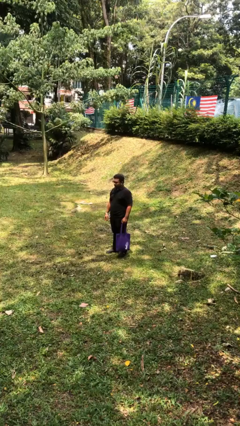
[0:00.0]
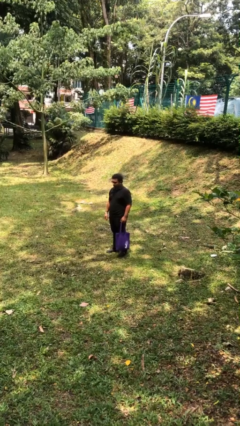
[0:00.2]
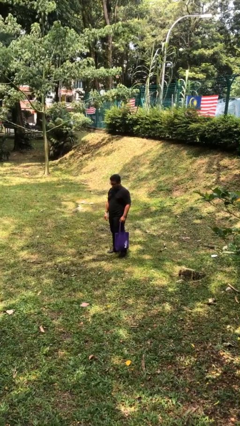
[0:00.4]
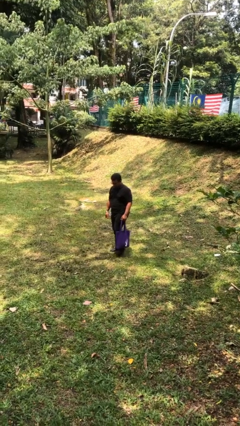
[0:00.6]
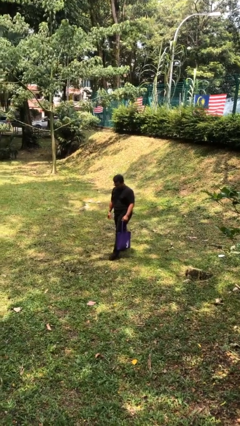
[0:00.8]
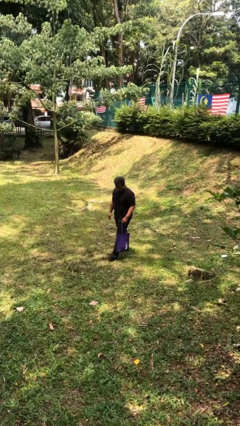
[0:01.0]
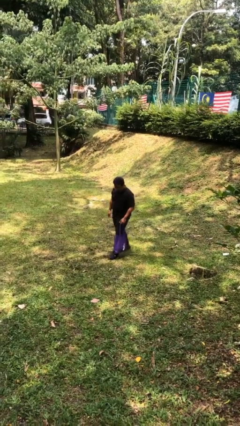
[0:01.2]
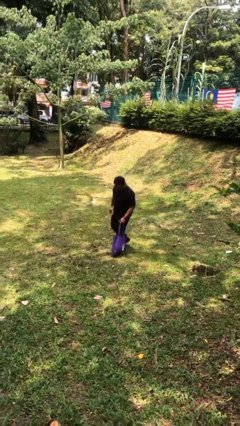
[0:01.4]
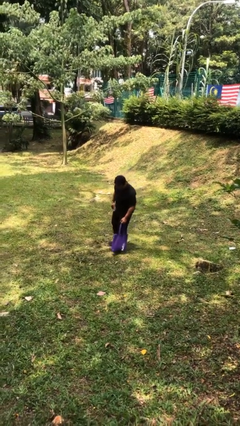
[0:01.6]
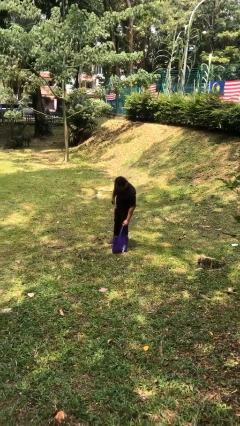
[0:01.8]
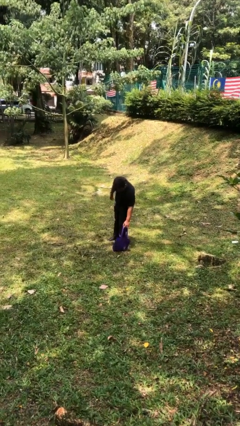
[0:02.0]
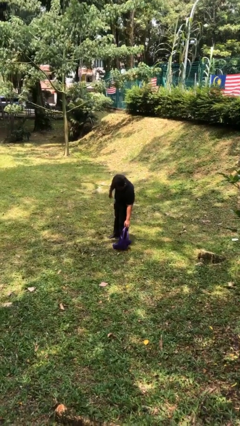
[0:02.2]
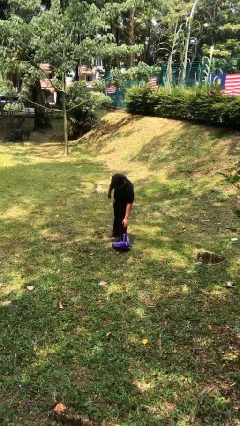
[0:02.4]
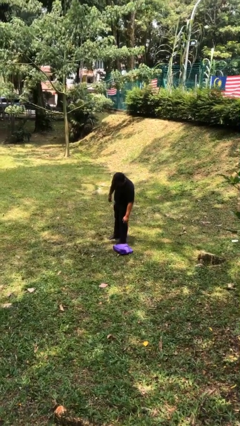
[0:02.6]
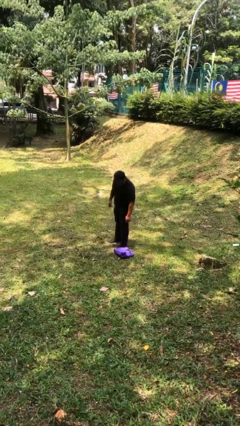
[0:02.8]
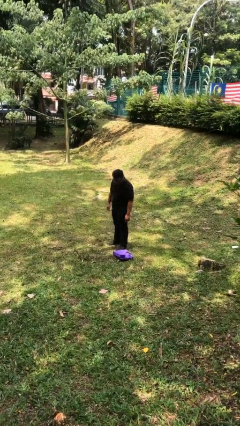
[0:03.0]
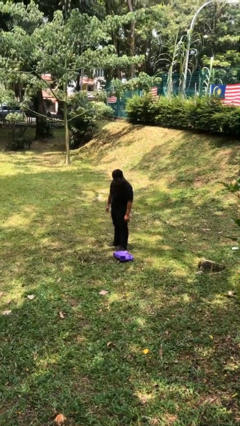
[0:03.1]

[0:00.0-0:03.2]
person puts down object on floor

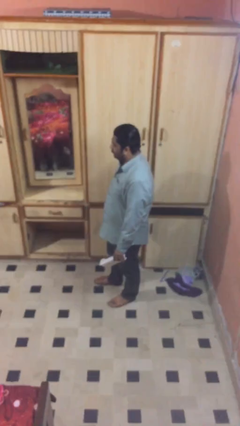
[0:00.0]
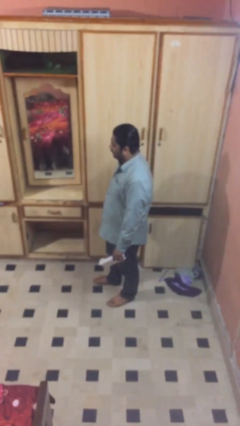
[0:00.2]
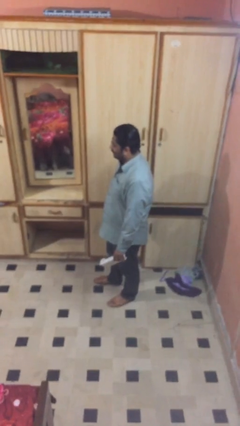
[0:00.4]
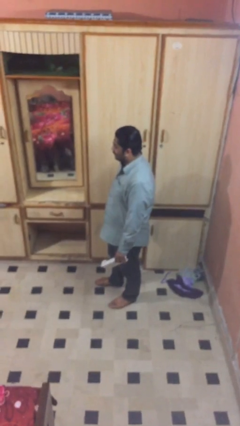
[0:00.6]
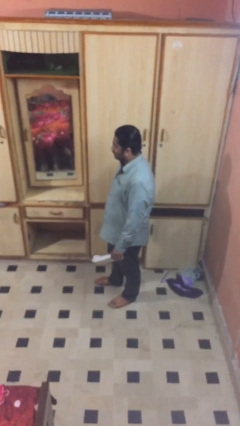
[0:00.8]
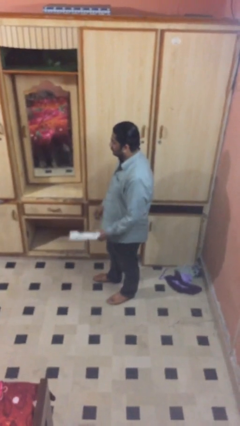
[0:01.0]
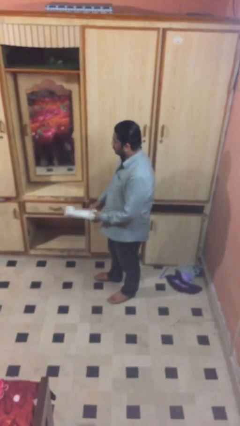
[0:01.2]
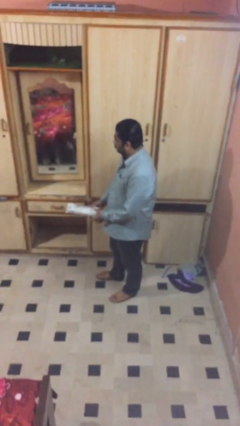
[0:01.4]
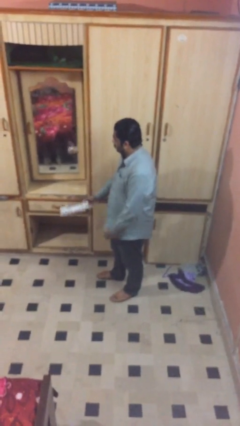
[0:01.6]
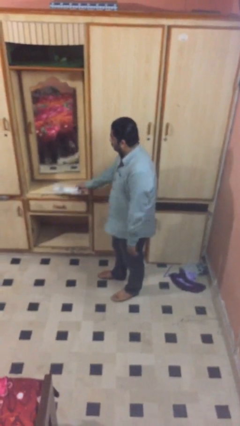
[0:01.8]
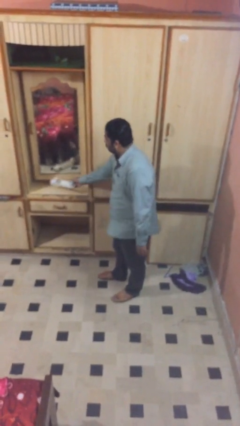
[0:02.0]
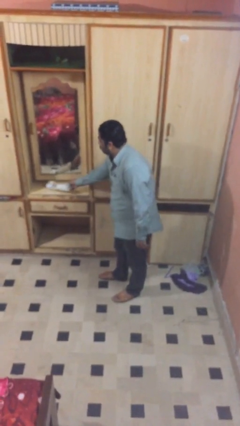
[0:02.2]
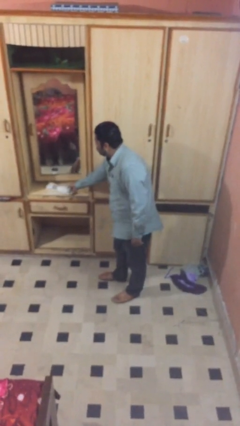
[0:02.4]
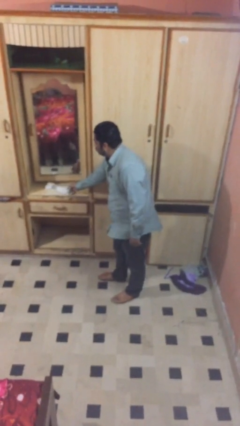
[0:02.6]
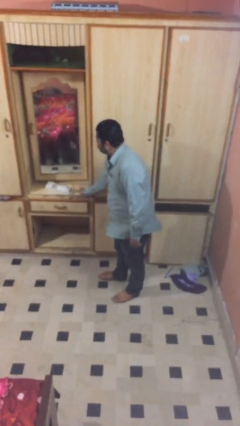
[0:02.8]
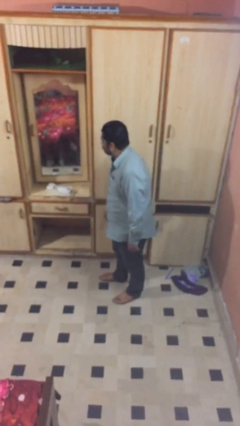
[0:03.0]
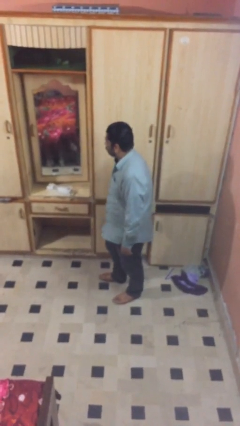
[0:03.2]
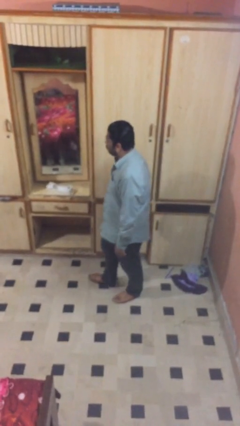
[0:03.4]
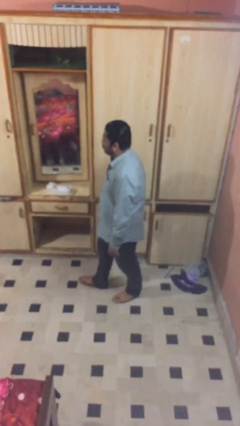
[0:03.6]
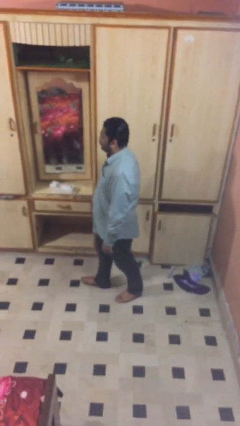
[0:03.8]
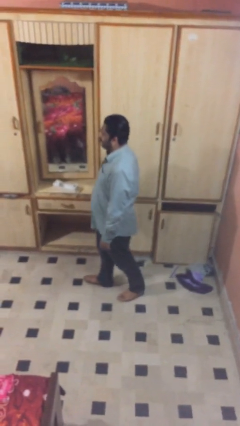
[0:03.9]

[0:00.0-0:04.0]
person puts down object on table

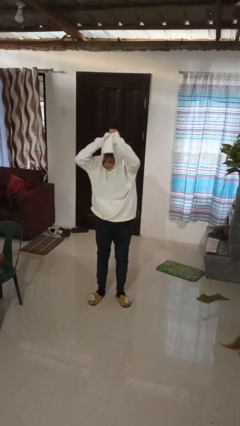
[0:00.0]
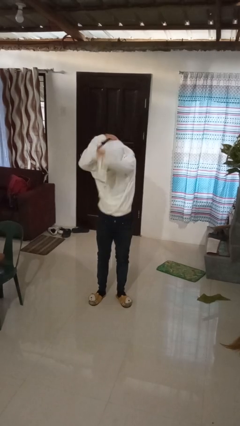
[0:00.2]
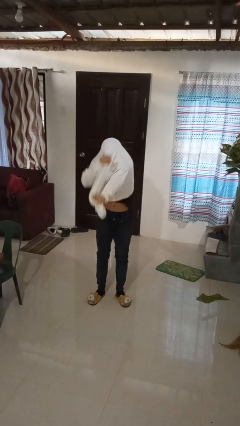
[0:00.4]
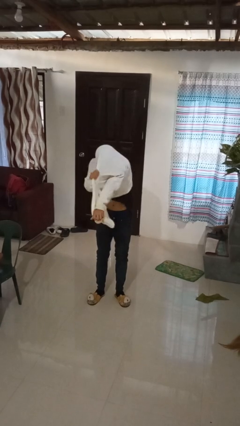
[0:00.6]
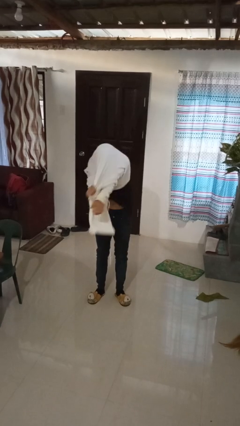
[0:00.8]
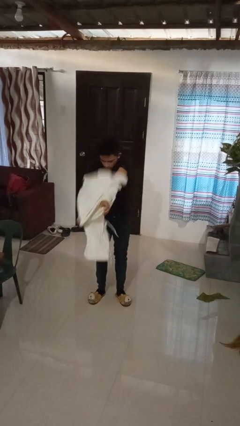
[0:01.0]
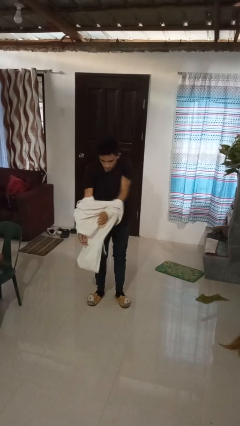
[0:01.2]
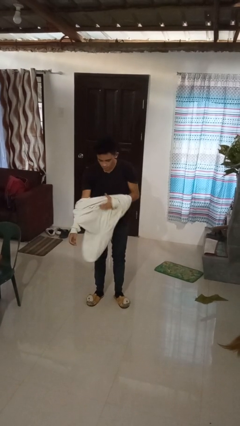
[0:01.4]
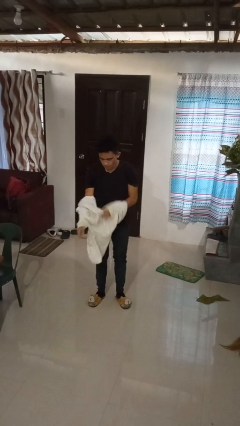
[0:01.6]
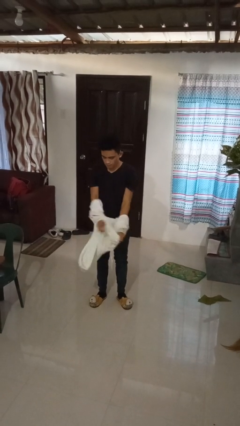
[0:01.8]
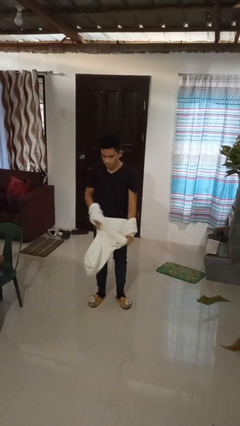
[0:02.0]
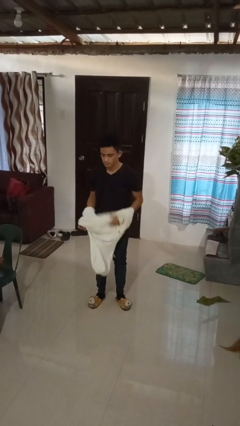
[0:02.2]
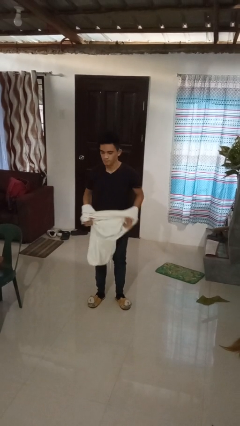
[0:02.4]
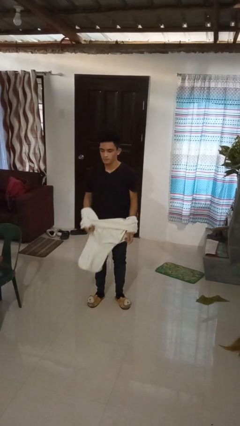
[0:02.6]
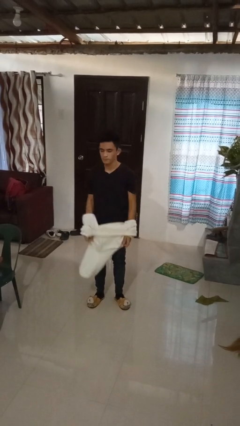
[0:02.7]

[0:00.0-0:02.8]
person takes off hoodie

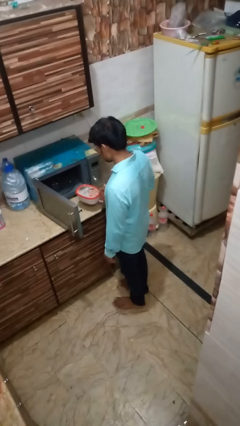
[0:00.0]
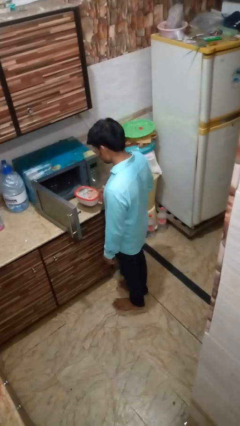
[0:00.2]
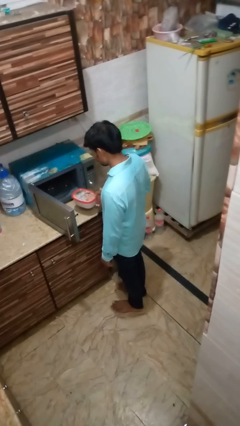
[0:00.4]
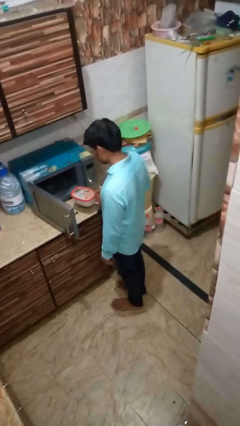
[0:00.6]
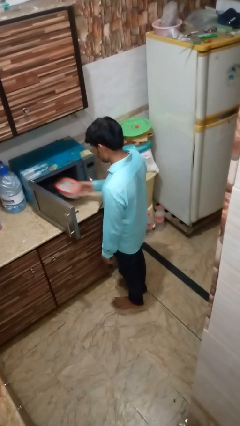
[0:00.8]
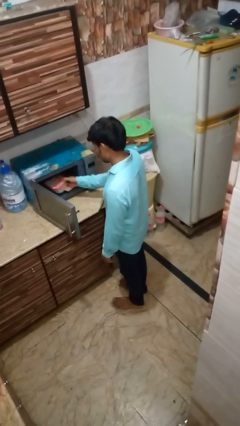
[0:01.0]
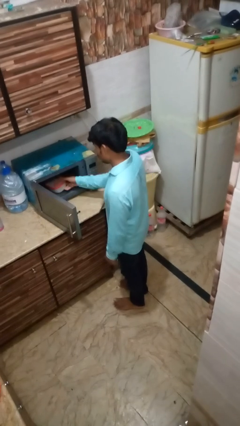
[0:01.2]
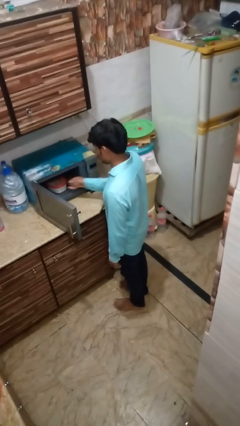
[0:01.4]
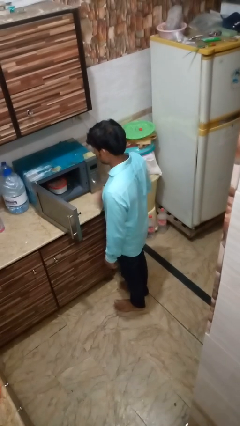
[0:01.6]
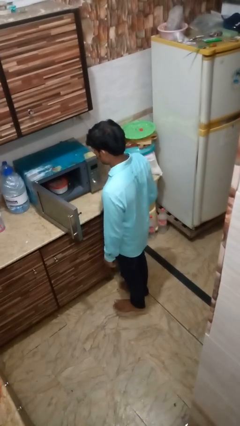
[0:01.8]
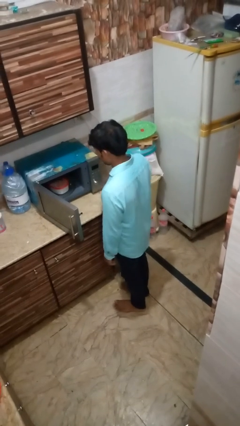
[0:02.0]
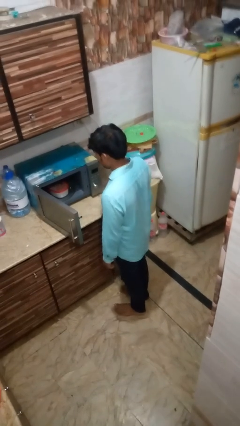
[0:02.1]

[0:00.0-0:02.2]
person puts object into oven

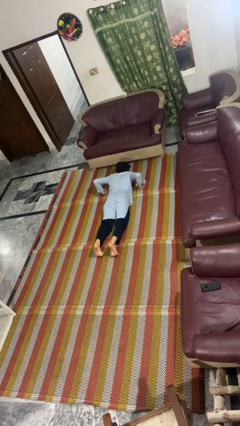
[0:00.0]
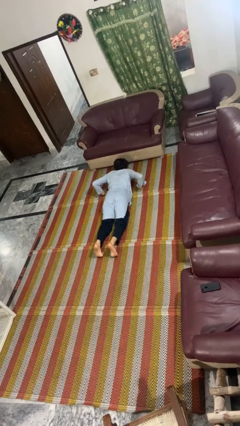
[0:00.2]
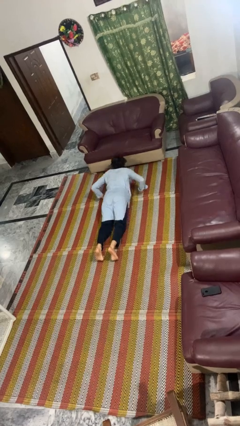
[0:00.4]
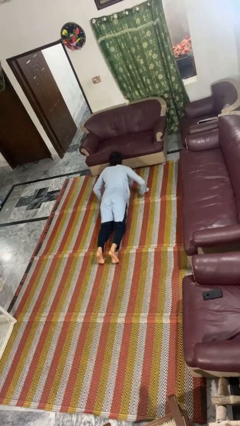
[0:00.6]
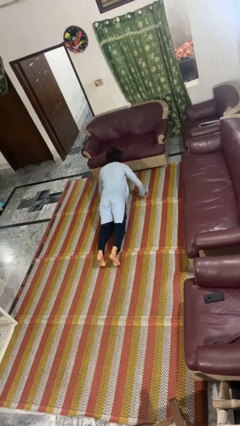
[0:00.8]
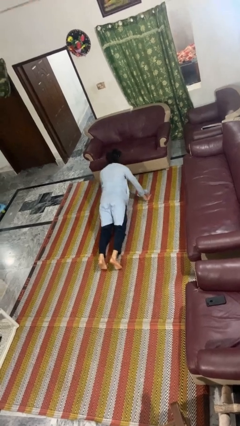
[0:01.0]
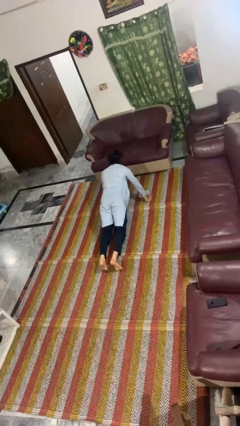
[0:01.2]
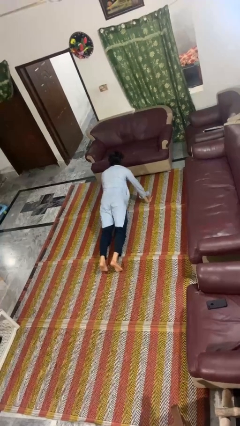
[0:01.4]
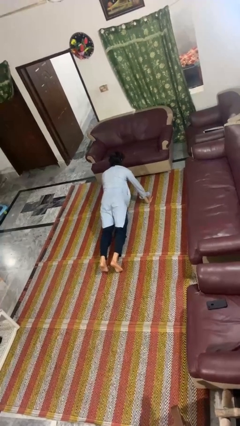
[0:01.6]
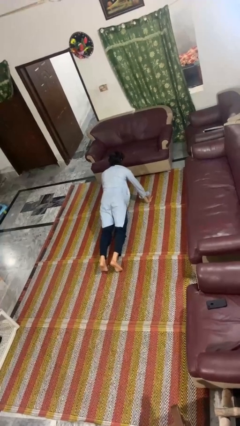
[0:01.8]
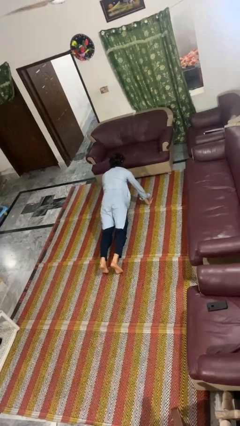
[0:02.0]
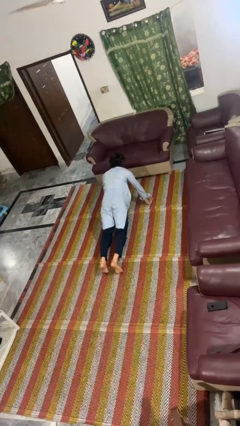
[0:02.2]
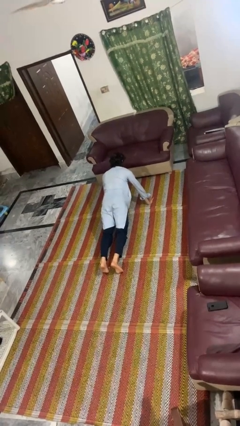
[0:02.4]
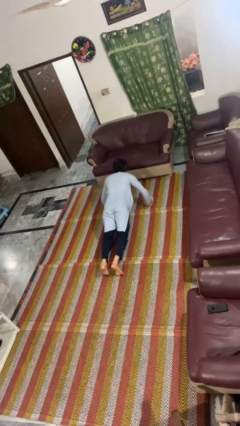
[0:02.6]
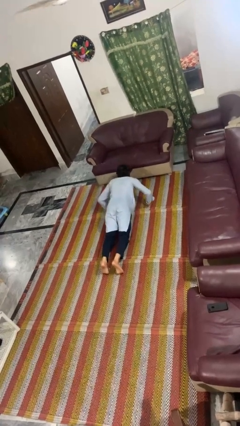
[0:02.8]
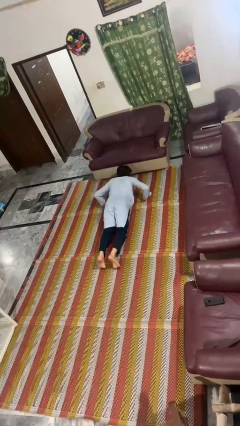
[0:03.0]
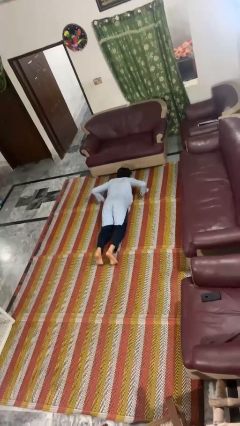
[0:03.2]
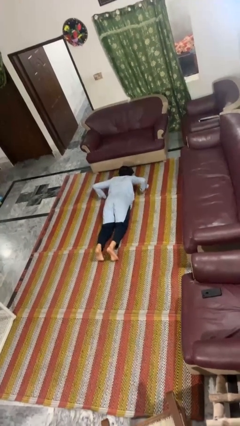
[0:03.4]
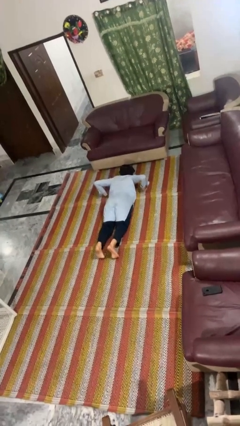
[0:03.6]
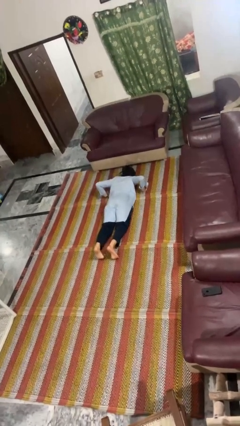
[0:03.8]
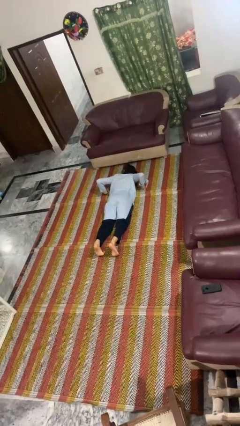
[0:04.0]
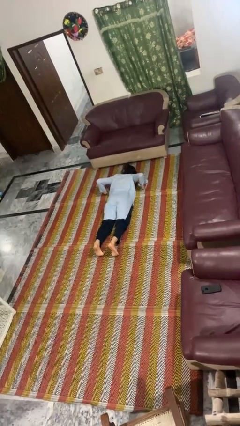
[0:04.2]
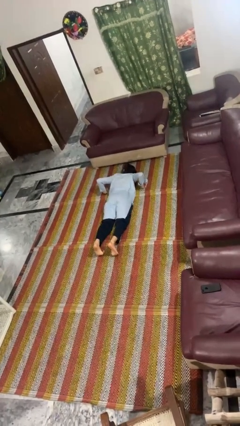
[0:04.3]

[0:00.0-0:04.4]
person exercises with pushup

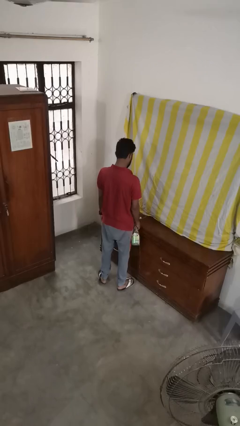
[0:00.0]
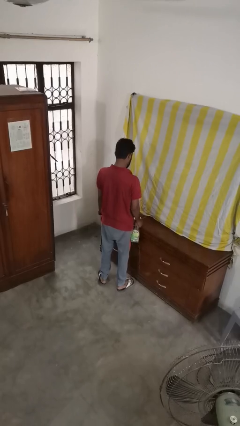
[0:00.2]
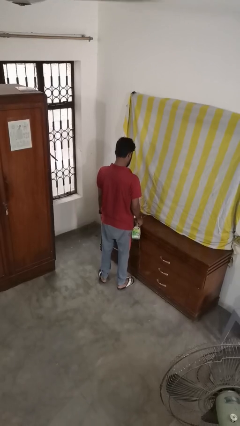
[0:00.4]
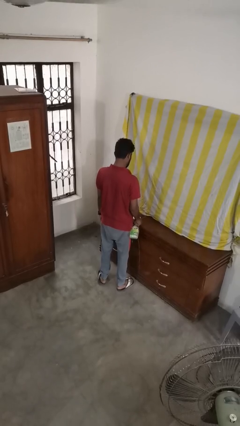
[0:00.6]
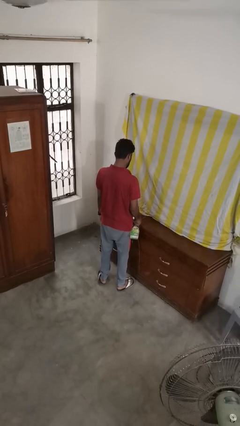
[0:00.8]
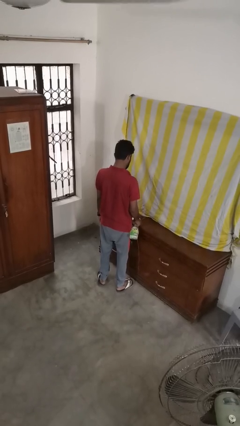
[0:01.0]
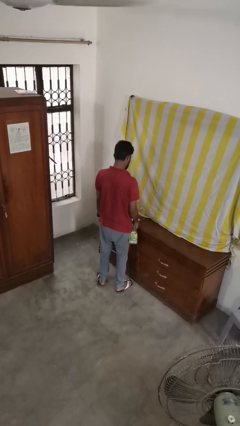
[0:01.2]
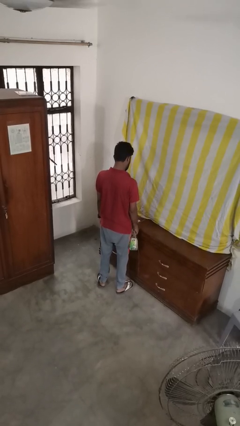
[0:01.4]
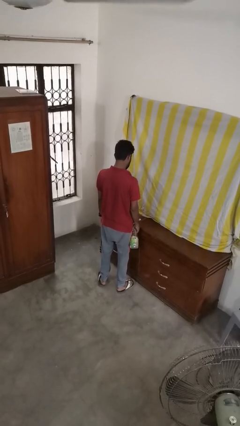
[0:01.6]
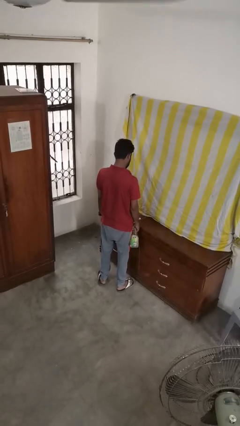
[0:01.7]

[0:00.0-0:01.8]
person sprays from bottle
